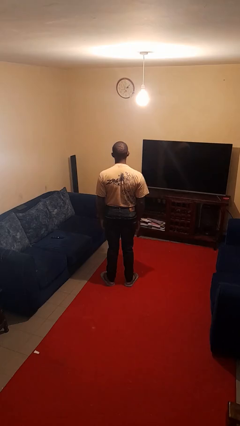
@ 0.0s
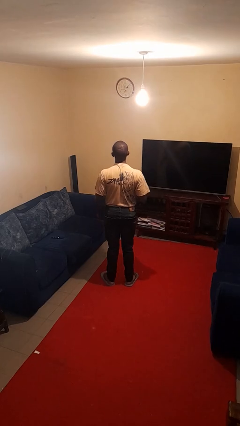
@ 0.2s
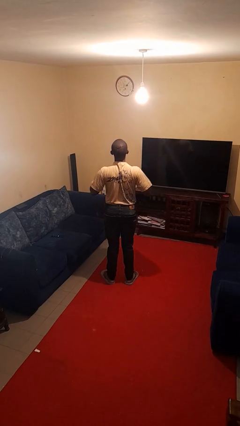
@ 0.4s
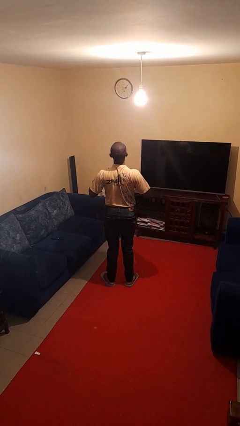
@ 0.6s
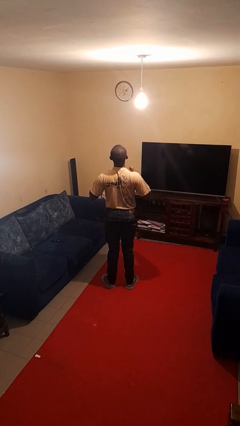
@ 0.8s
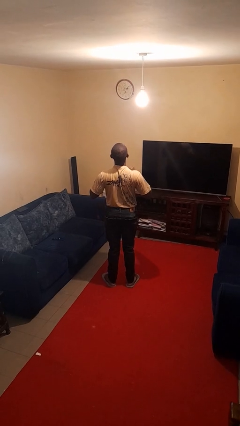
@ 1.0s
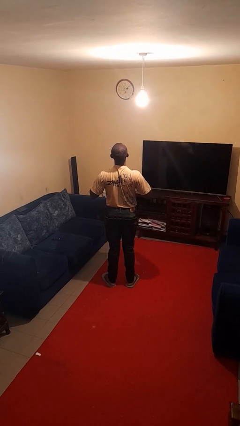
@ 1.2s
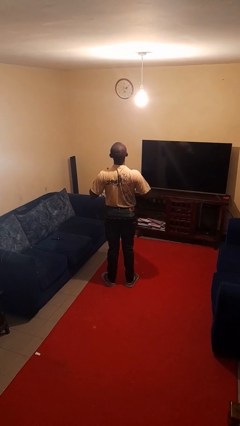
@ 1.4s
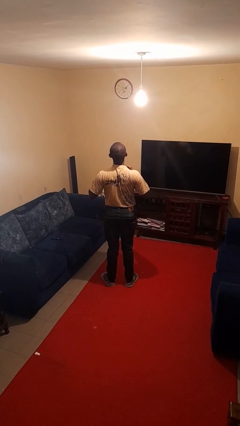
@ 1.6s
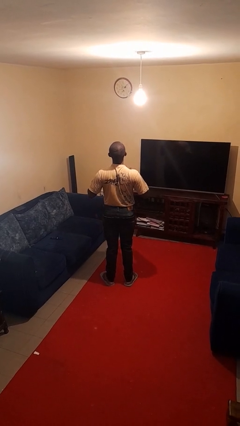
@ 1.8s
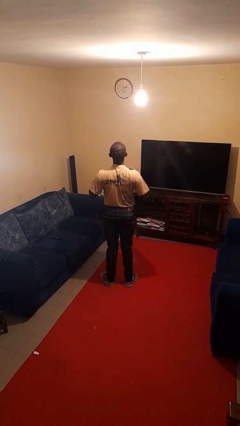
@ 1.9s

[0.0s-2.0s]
person drums on chest

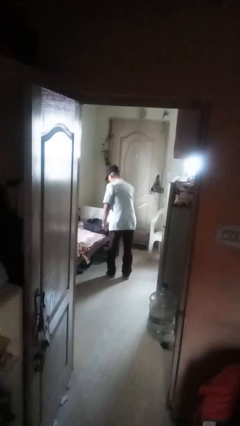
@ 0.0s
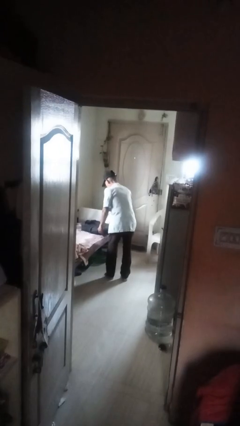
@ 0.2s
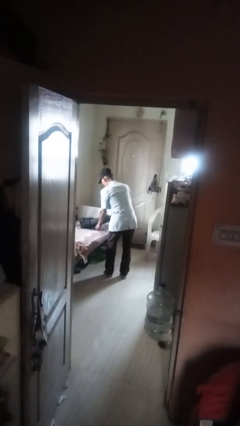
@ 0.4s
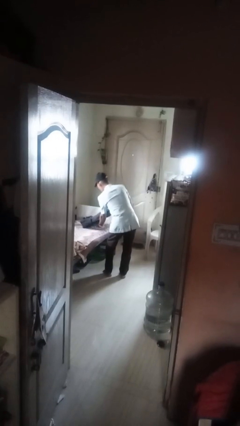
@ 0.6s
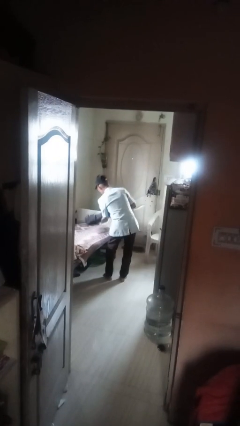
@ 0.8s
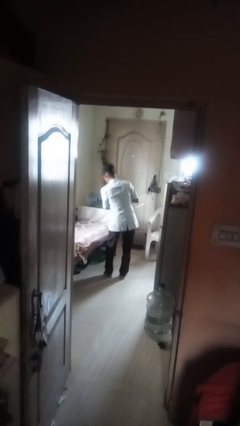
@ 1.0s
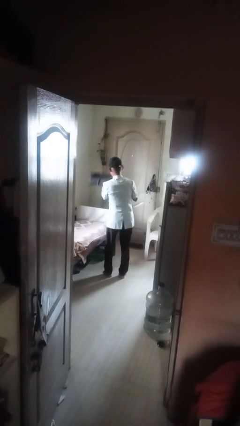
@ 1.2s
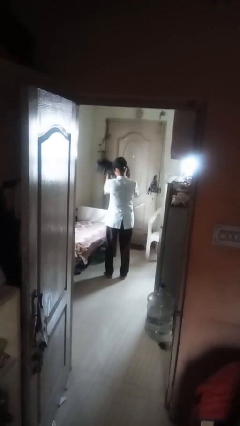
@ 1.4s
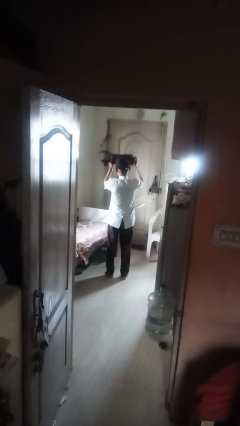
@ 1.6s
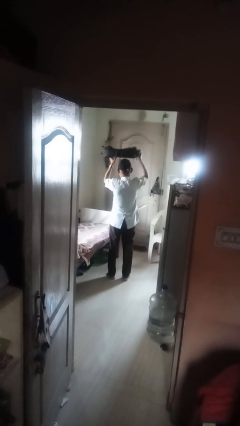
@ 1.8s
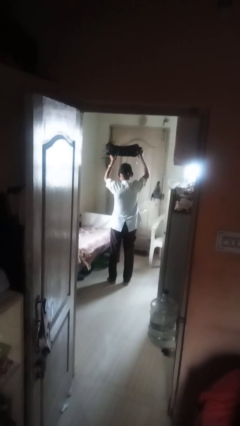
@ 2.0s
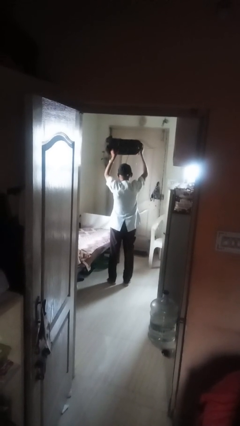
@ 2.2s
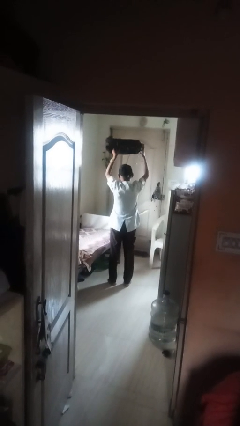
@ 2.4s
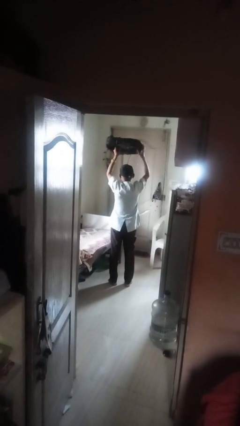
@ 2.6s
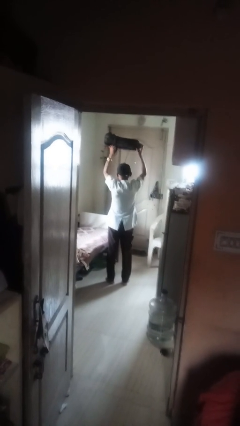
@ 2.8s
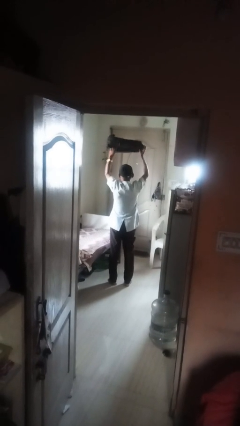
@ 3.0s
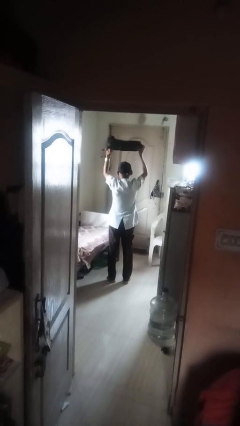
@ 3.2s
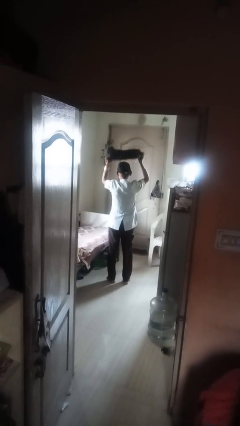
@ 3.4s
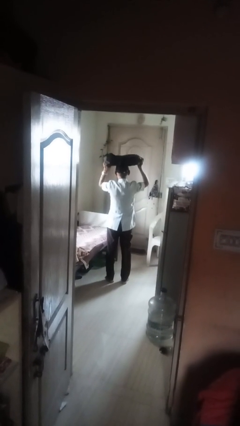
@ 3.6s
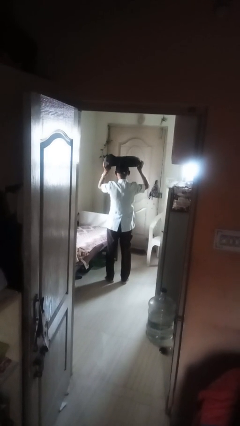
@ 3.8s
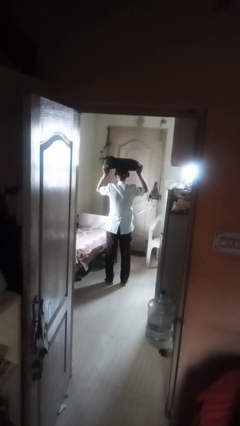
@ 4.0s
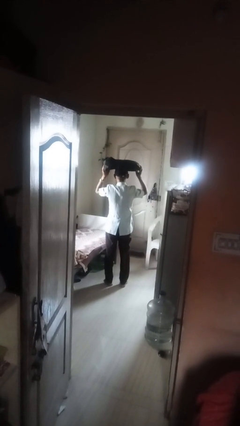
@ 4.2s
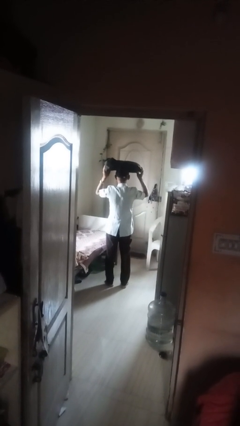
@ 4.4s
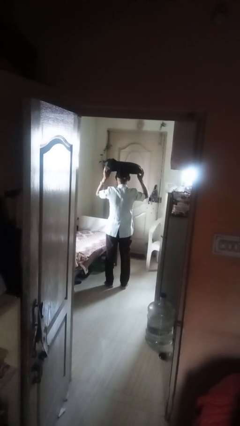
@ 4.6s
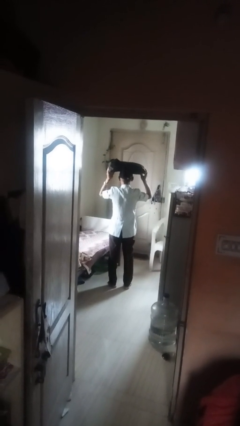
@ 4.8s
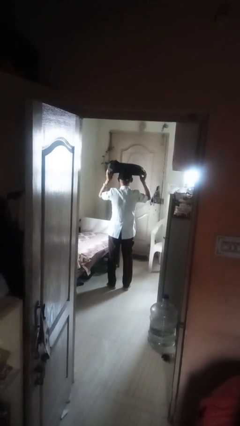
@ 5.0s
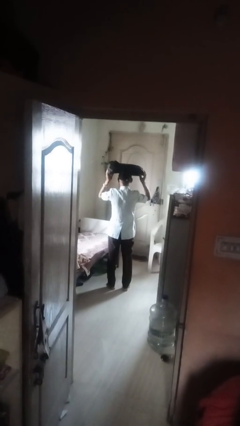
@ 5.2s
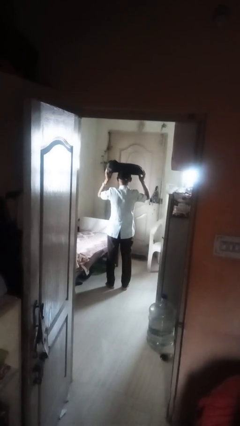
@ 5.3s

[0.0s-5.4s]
person holds object above head

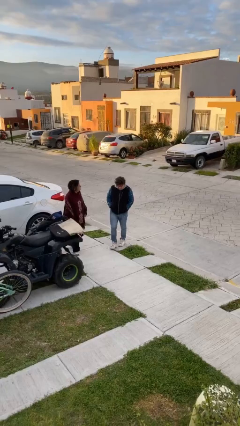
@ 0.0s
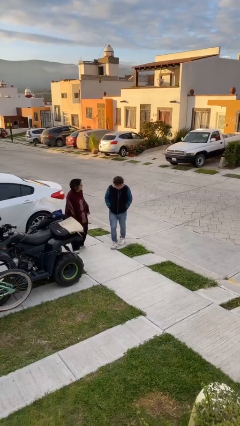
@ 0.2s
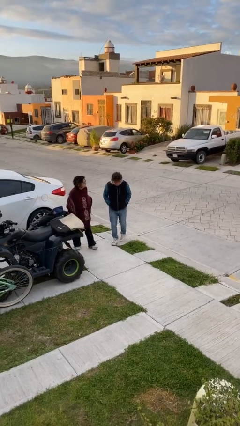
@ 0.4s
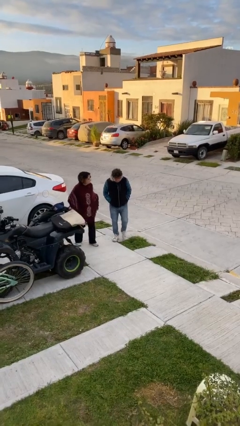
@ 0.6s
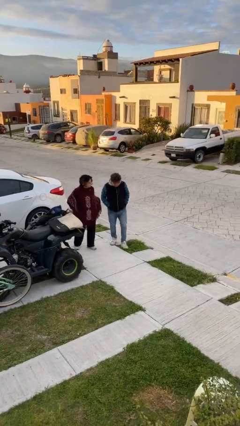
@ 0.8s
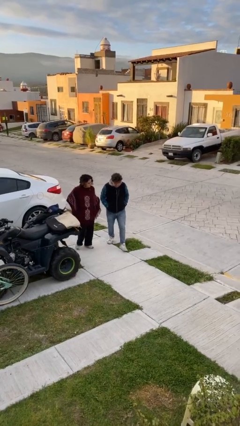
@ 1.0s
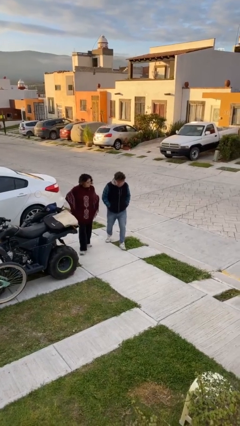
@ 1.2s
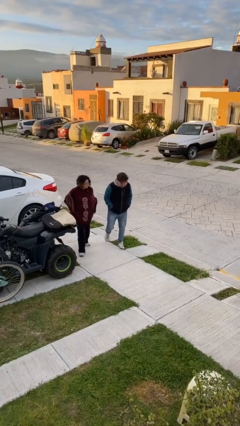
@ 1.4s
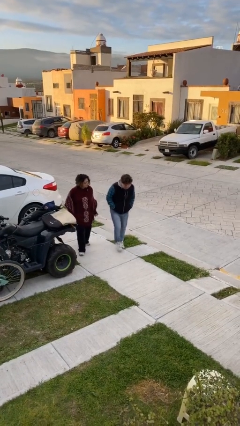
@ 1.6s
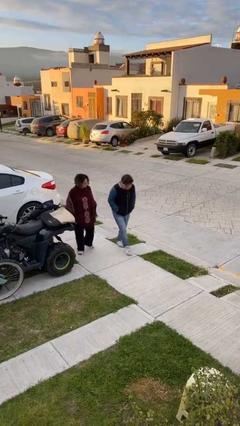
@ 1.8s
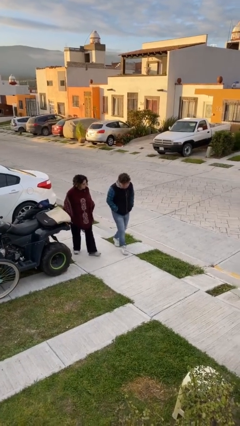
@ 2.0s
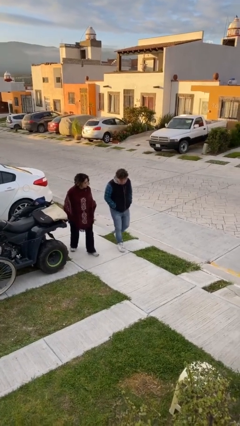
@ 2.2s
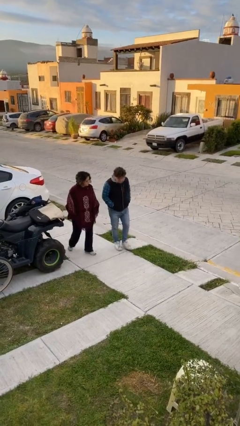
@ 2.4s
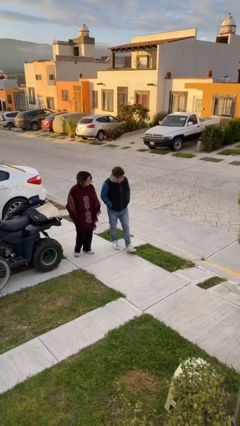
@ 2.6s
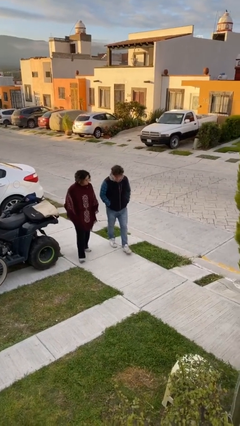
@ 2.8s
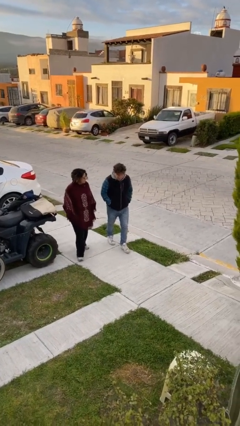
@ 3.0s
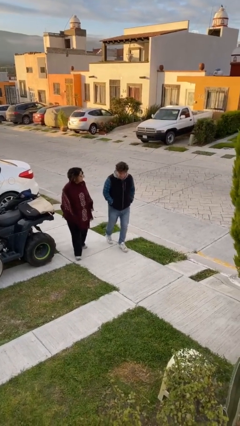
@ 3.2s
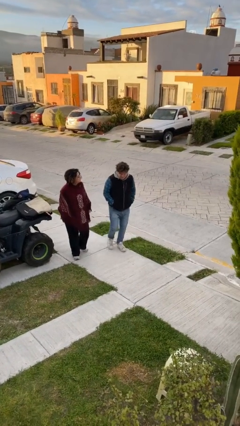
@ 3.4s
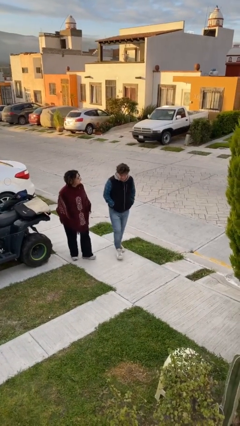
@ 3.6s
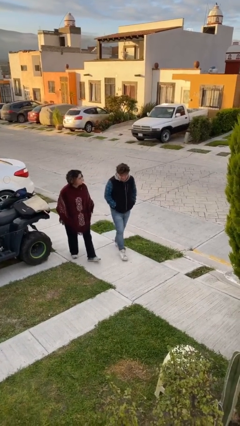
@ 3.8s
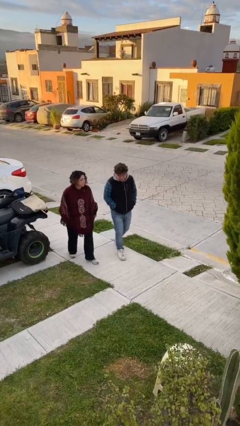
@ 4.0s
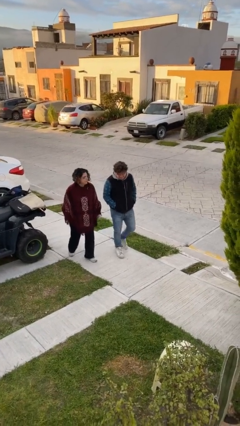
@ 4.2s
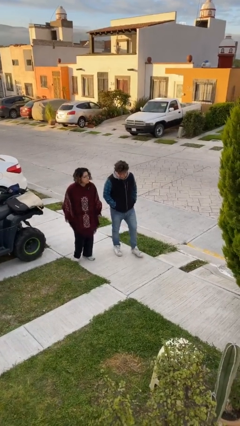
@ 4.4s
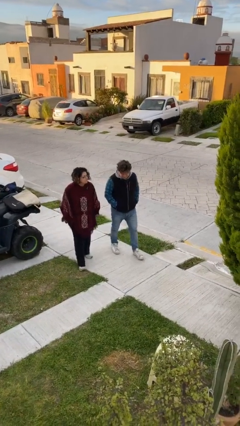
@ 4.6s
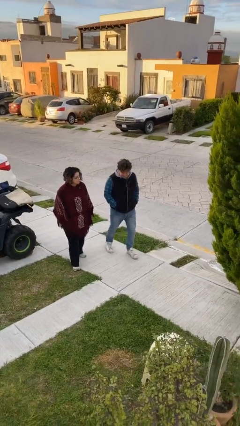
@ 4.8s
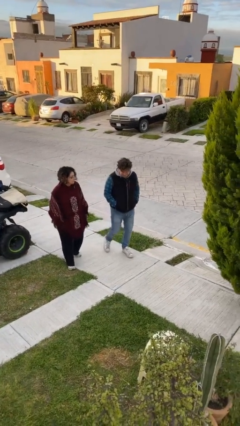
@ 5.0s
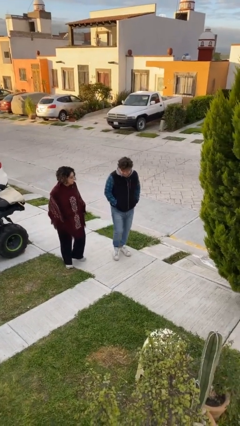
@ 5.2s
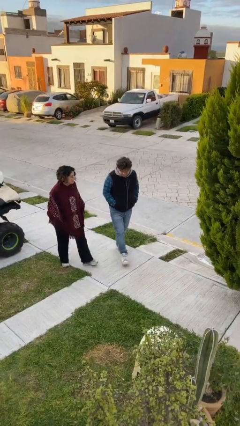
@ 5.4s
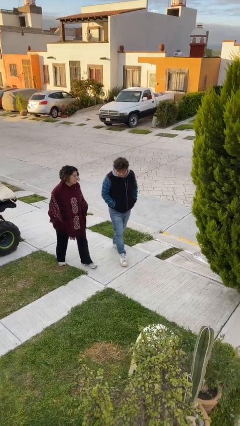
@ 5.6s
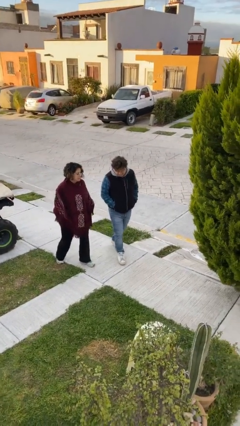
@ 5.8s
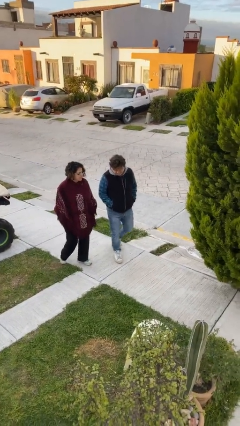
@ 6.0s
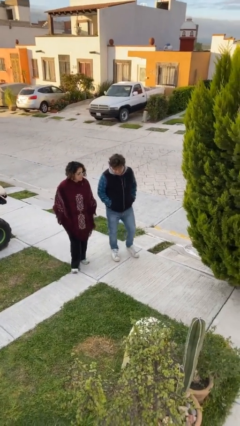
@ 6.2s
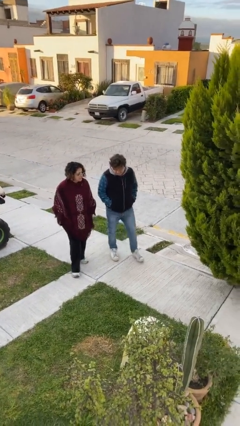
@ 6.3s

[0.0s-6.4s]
person talks to person

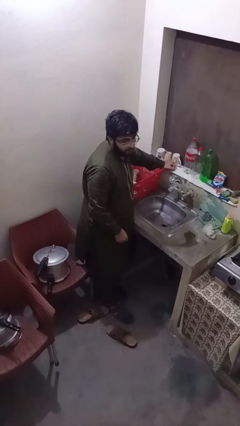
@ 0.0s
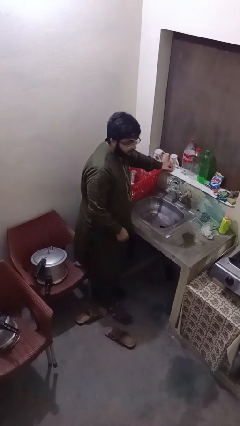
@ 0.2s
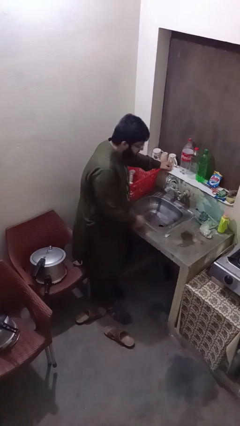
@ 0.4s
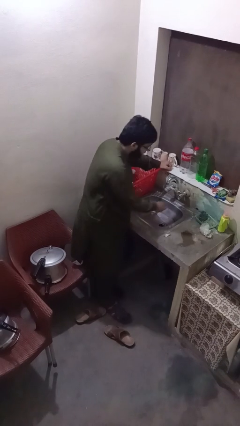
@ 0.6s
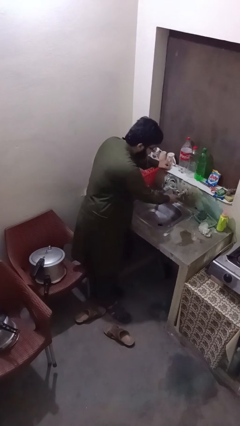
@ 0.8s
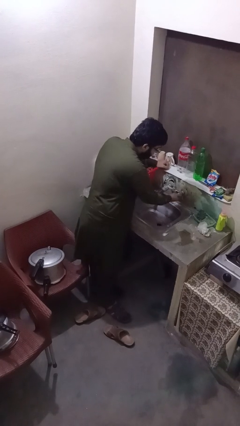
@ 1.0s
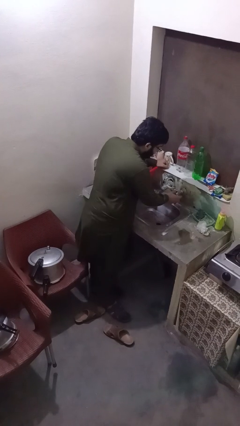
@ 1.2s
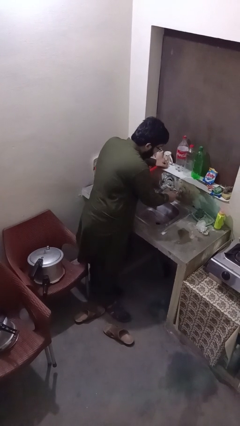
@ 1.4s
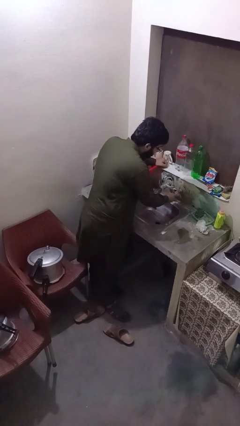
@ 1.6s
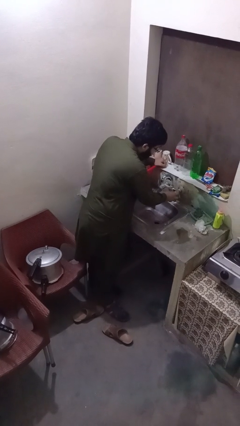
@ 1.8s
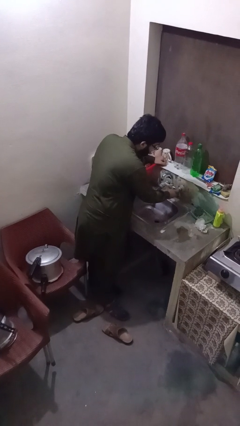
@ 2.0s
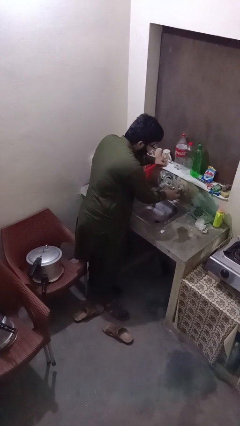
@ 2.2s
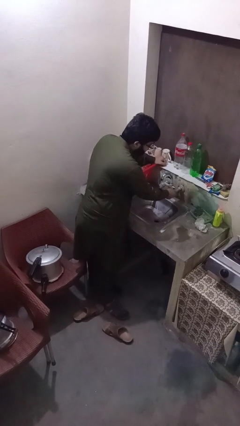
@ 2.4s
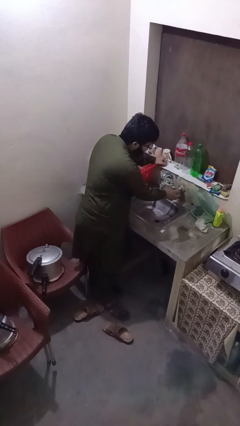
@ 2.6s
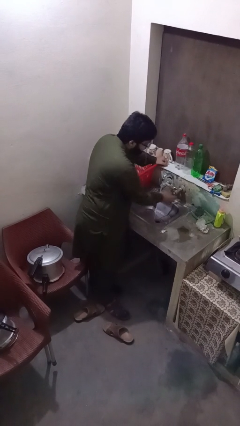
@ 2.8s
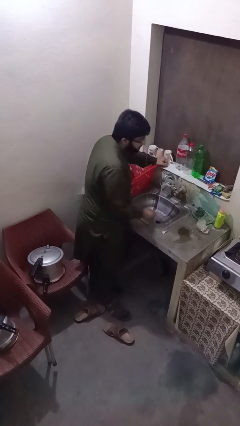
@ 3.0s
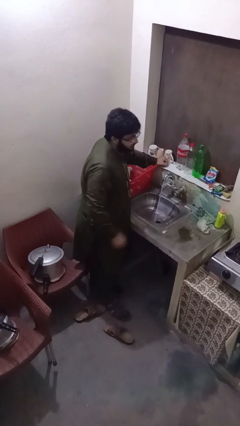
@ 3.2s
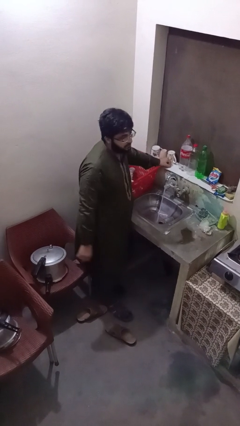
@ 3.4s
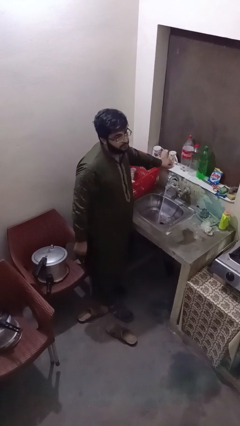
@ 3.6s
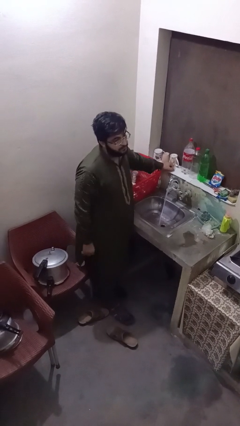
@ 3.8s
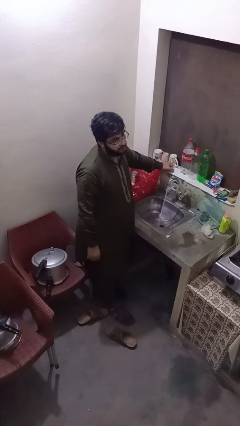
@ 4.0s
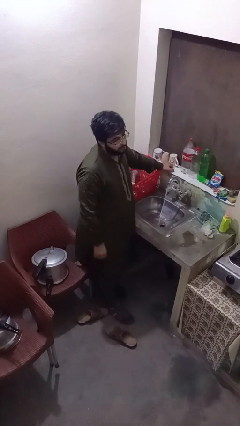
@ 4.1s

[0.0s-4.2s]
person turns on faucet

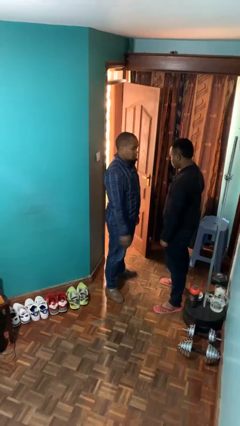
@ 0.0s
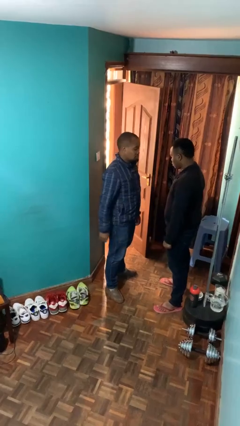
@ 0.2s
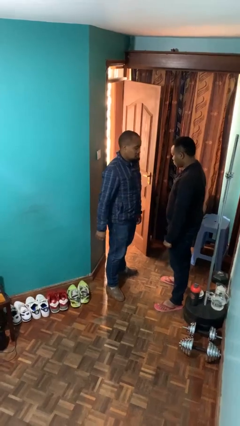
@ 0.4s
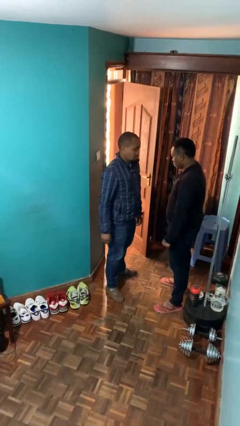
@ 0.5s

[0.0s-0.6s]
person grabs person by forearm
